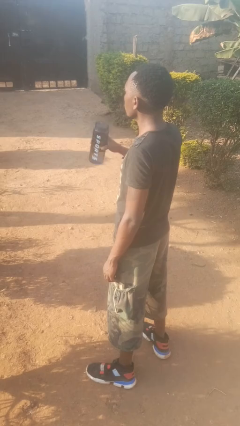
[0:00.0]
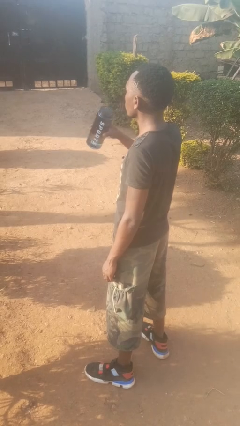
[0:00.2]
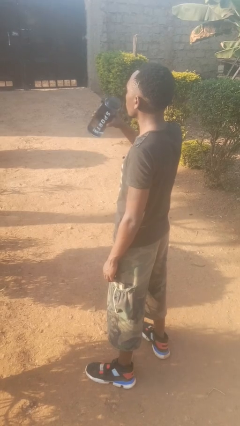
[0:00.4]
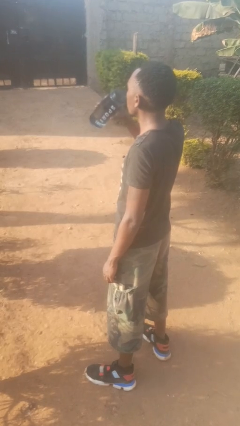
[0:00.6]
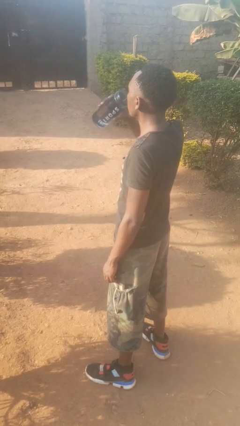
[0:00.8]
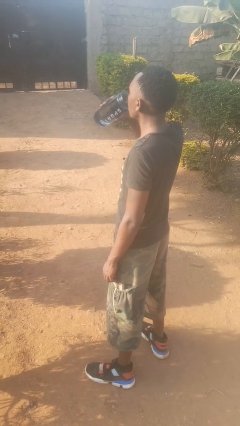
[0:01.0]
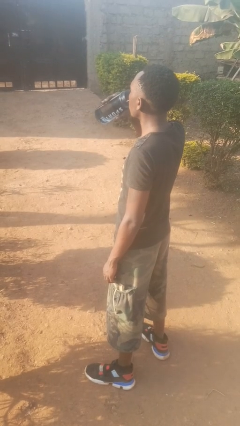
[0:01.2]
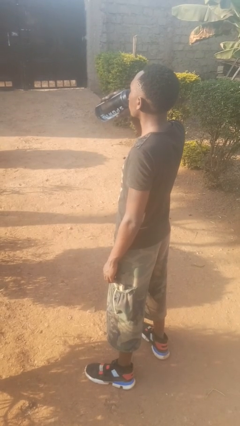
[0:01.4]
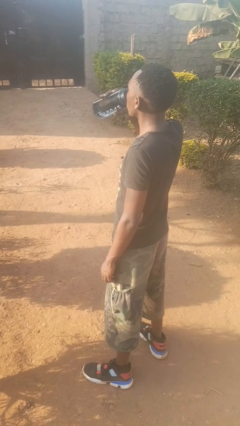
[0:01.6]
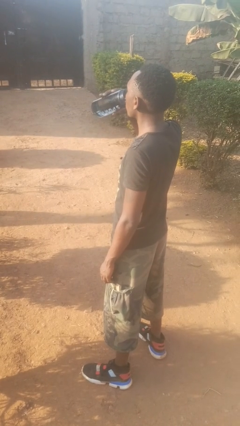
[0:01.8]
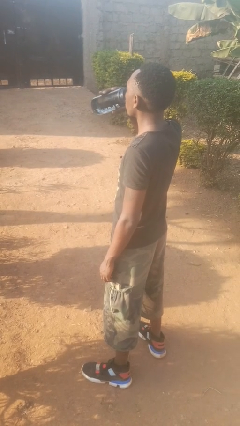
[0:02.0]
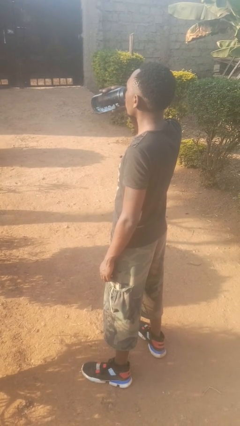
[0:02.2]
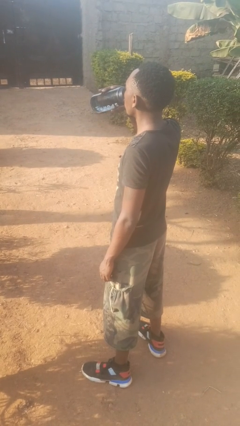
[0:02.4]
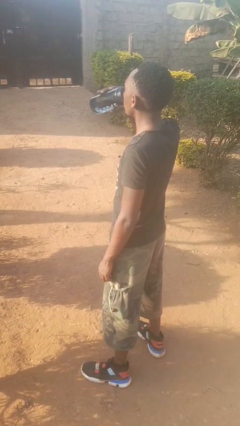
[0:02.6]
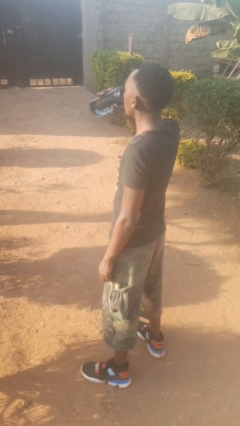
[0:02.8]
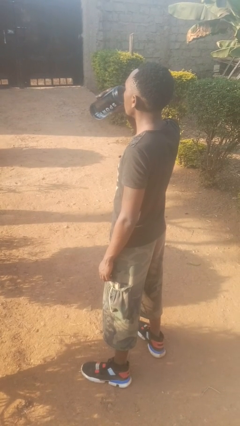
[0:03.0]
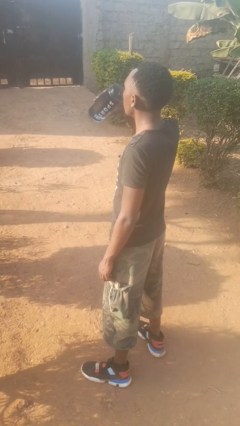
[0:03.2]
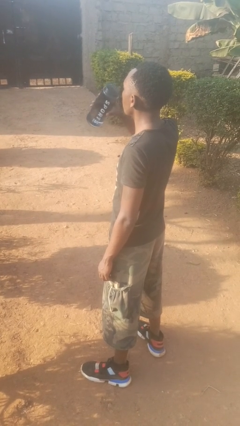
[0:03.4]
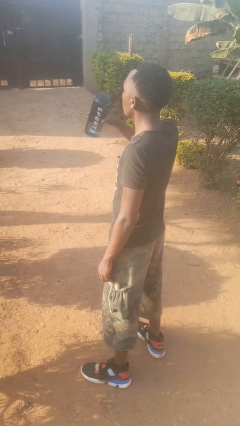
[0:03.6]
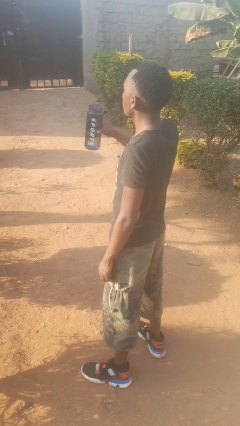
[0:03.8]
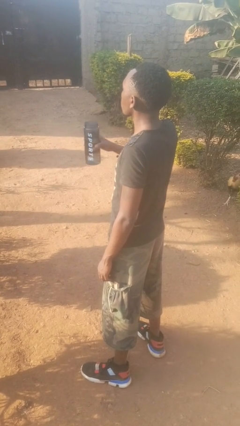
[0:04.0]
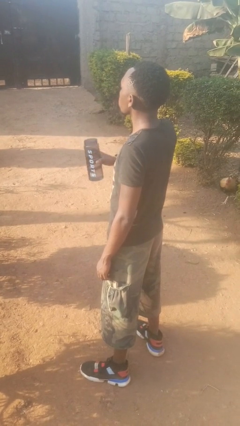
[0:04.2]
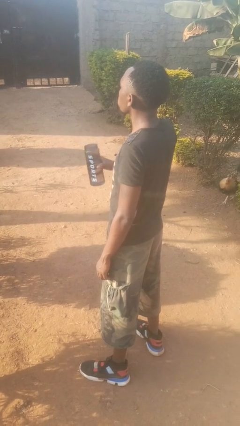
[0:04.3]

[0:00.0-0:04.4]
person drinks from bottle

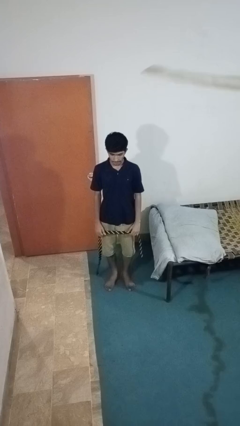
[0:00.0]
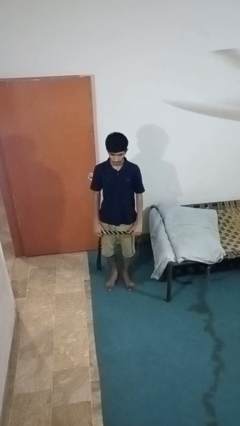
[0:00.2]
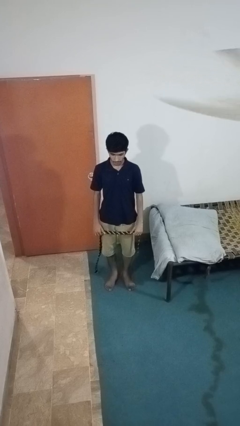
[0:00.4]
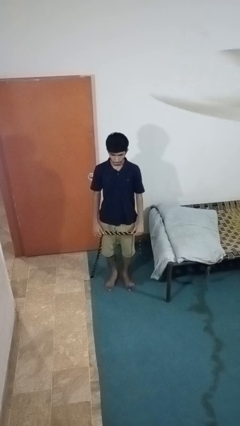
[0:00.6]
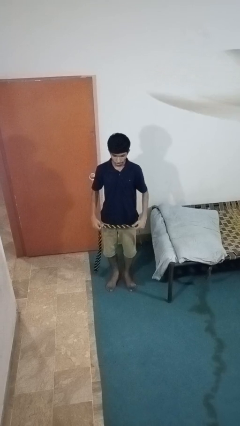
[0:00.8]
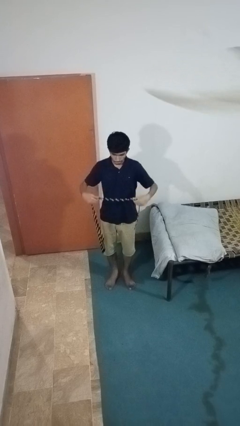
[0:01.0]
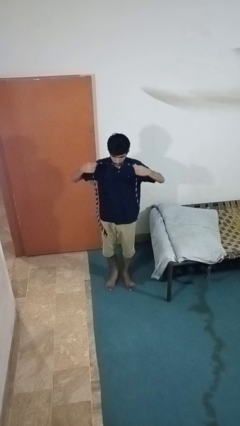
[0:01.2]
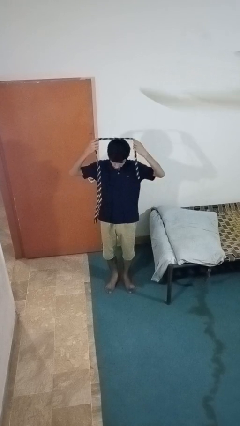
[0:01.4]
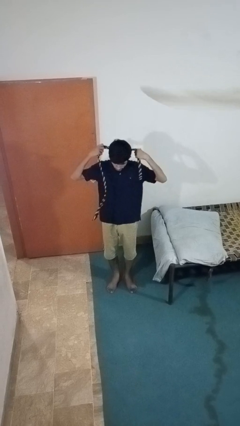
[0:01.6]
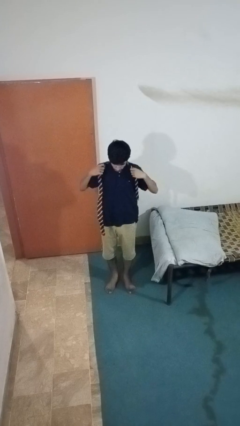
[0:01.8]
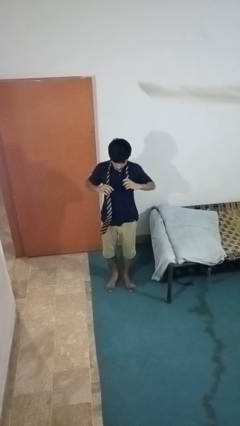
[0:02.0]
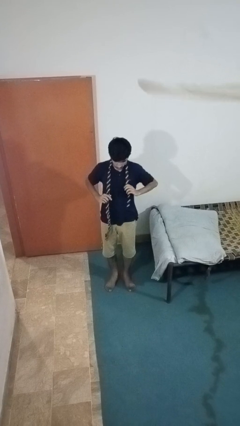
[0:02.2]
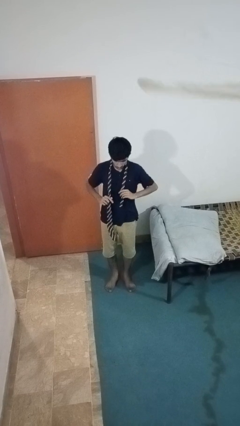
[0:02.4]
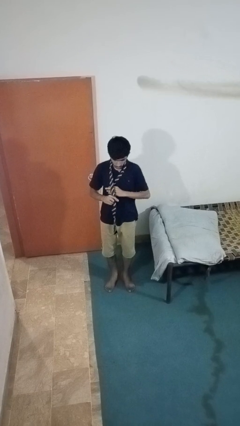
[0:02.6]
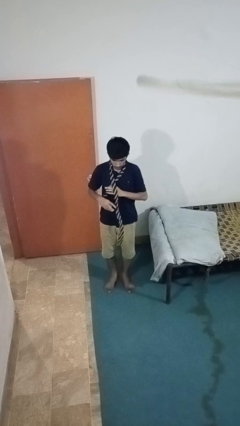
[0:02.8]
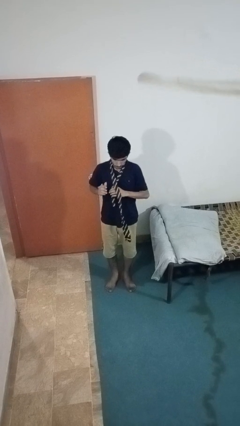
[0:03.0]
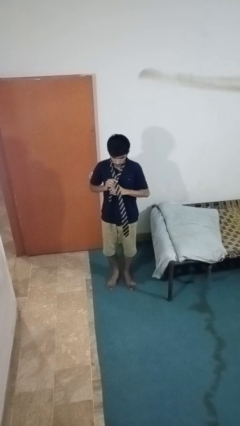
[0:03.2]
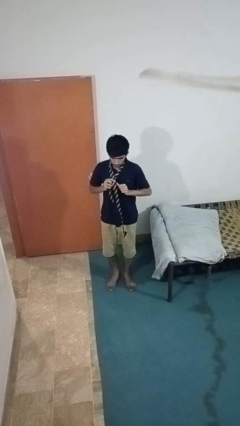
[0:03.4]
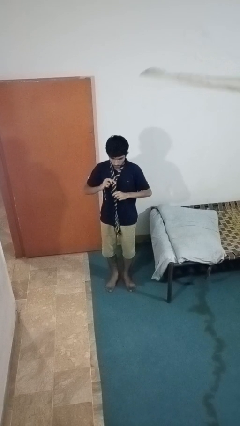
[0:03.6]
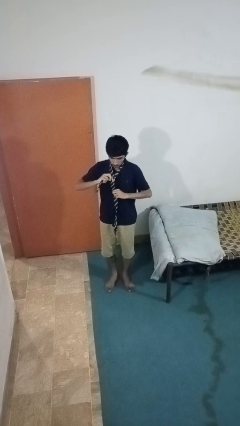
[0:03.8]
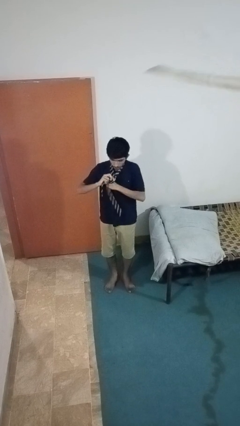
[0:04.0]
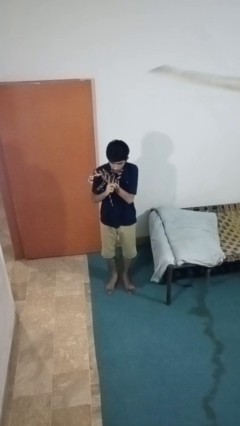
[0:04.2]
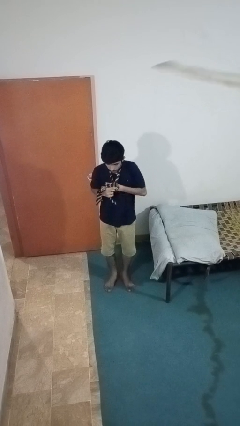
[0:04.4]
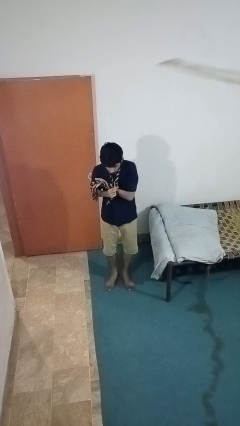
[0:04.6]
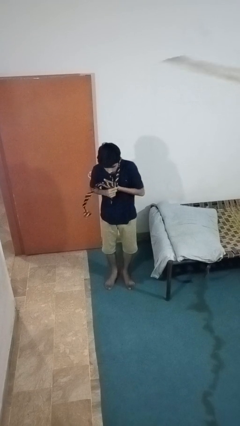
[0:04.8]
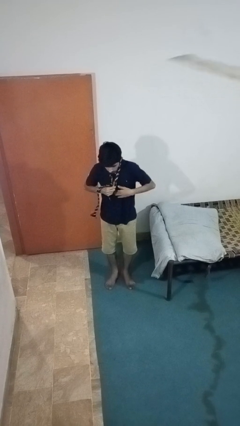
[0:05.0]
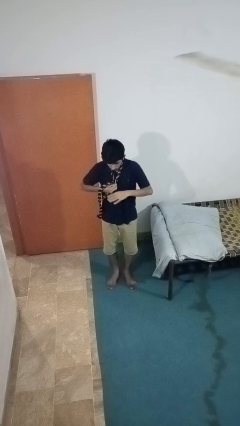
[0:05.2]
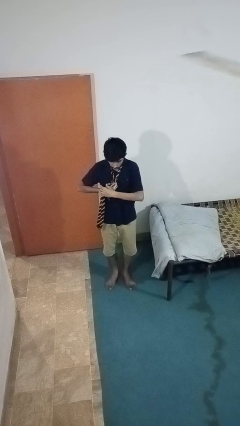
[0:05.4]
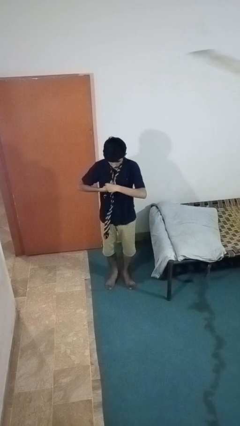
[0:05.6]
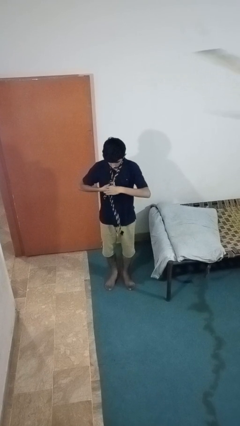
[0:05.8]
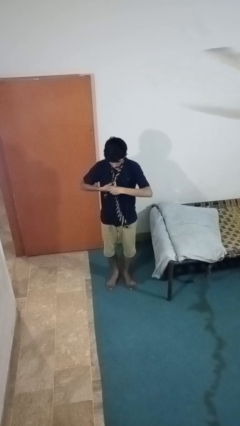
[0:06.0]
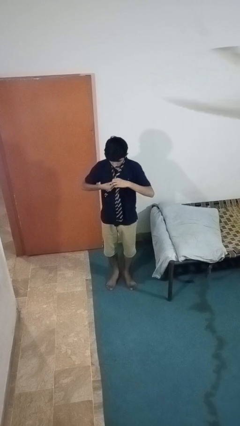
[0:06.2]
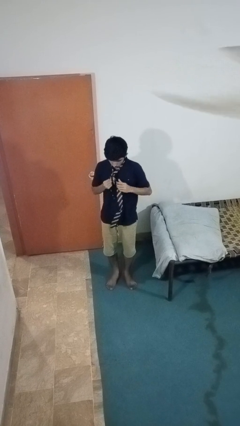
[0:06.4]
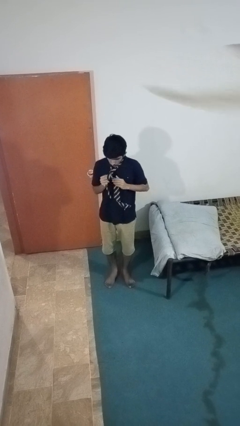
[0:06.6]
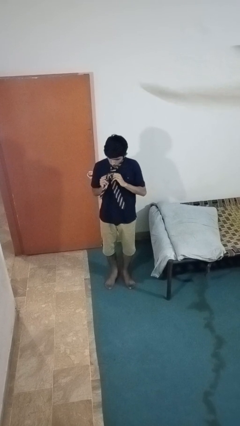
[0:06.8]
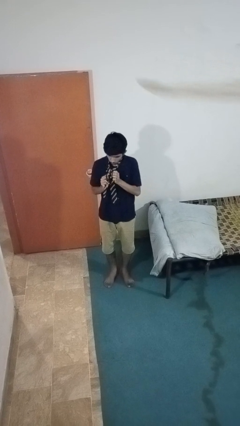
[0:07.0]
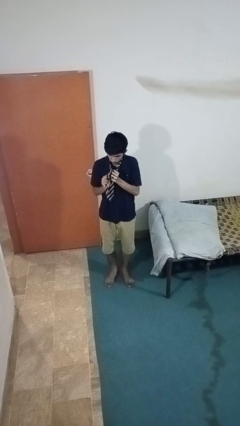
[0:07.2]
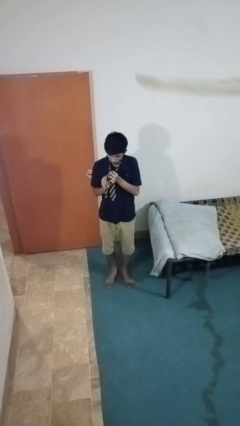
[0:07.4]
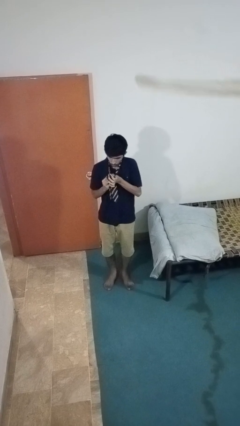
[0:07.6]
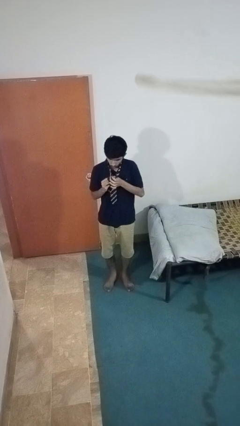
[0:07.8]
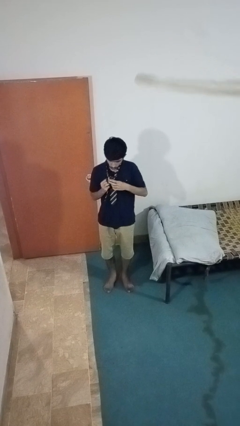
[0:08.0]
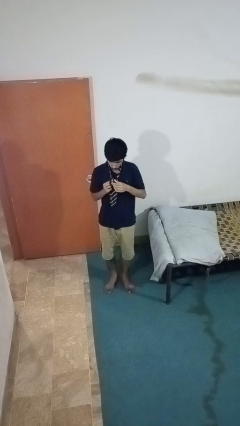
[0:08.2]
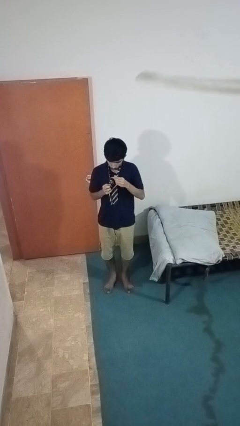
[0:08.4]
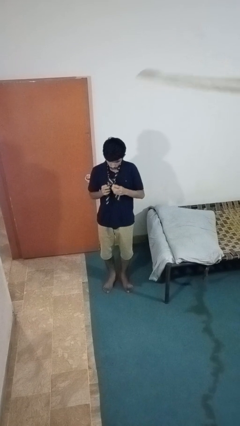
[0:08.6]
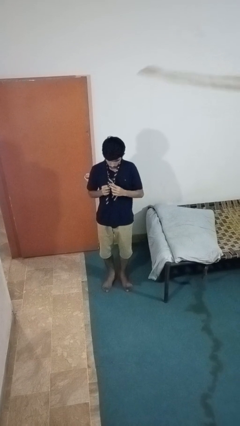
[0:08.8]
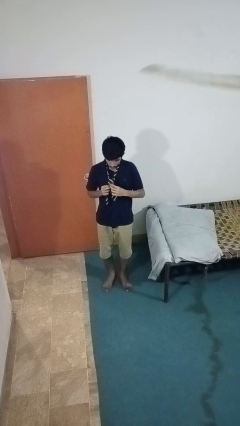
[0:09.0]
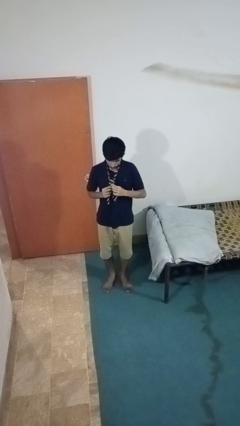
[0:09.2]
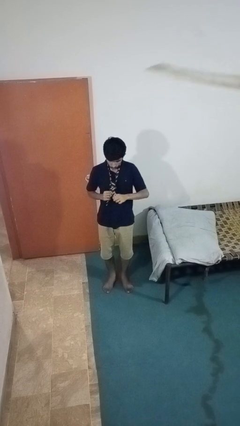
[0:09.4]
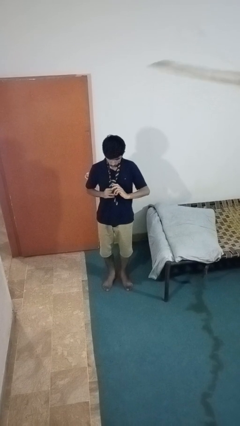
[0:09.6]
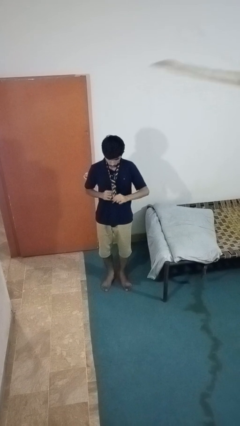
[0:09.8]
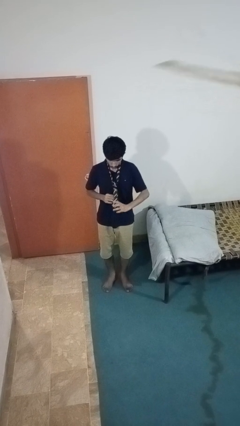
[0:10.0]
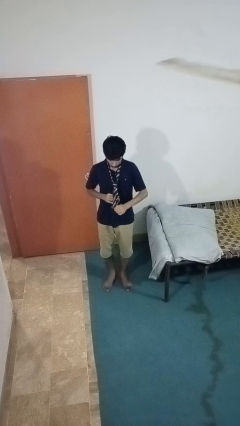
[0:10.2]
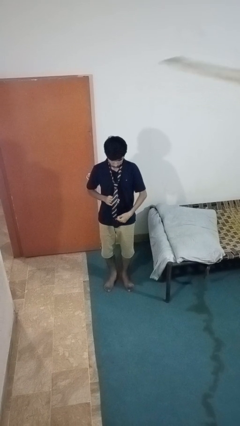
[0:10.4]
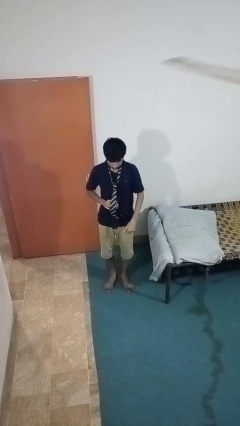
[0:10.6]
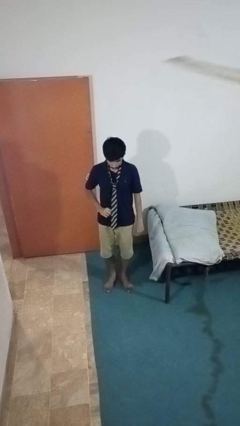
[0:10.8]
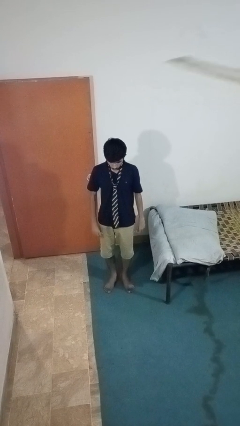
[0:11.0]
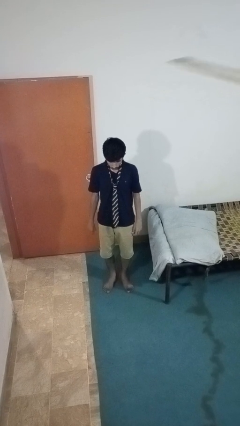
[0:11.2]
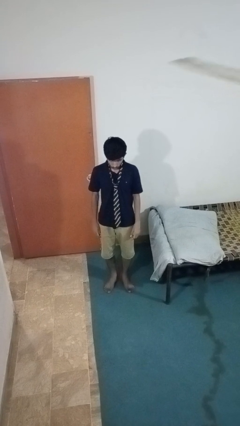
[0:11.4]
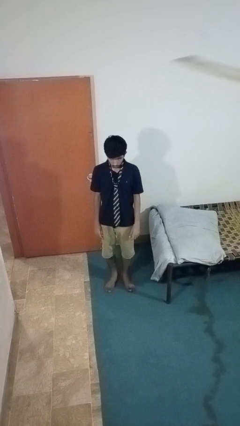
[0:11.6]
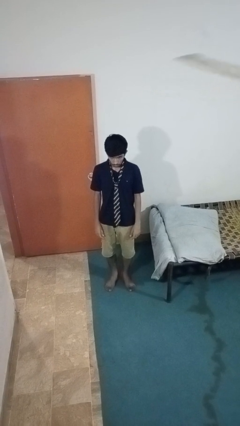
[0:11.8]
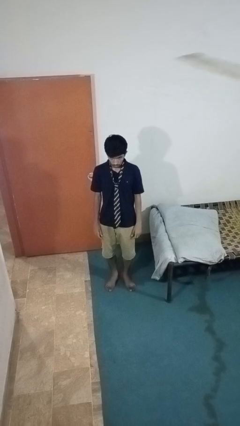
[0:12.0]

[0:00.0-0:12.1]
person puts on necktie

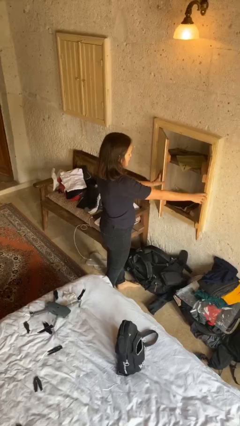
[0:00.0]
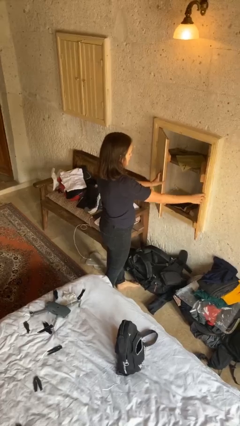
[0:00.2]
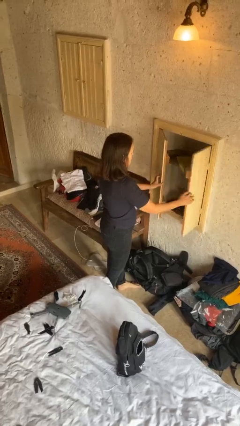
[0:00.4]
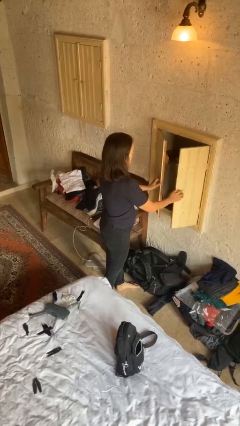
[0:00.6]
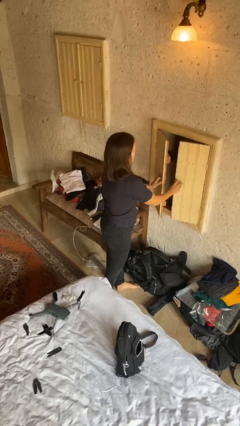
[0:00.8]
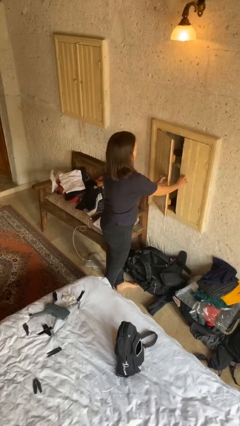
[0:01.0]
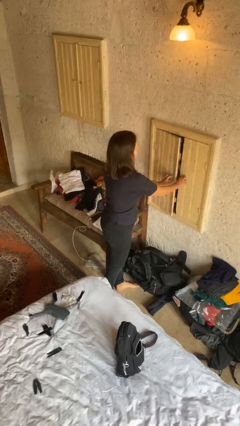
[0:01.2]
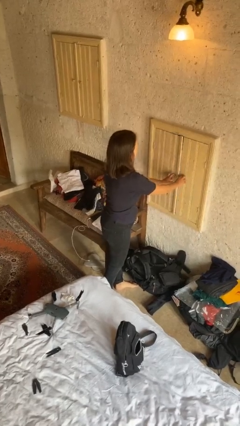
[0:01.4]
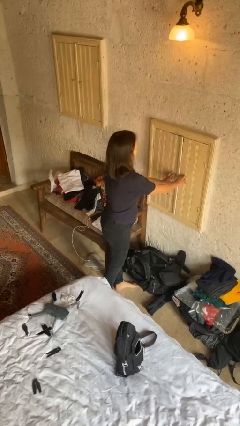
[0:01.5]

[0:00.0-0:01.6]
person closes closet door

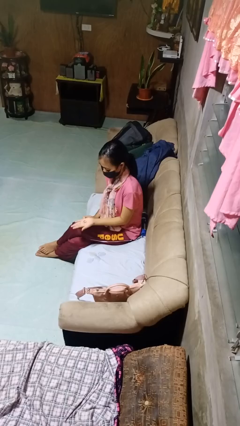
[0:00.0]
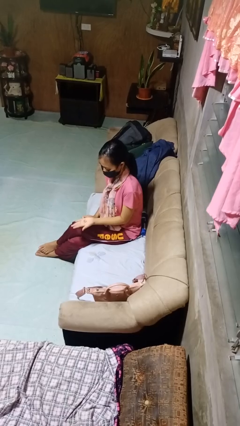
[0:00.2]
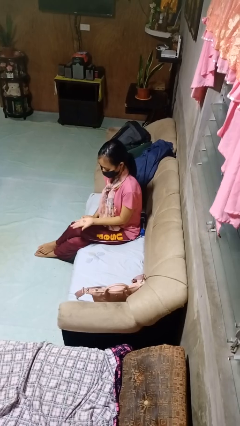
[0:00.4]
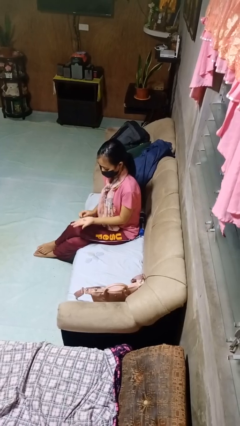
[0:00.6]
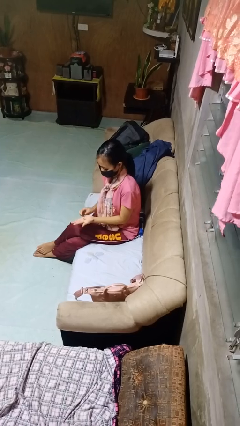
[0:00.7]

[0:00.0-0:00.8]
person puts on ring
